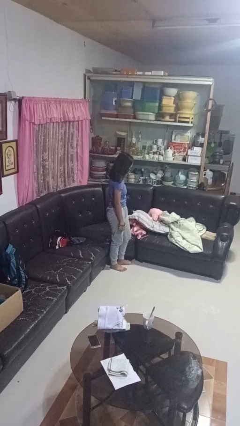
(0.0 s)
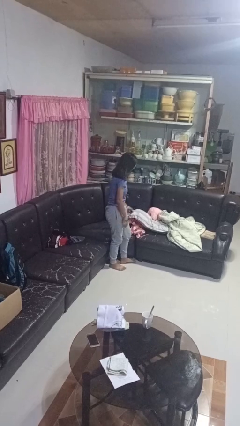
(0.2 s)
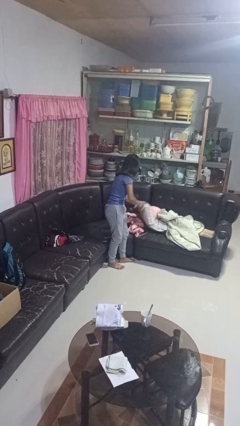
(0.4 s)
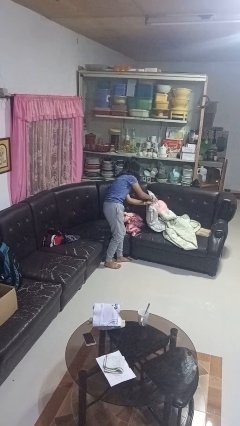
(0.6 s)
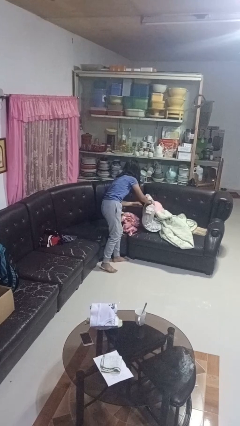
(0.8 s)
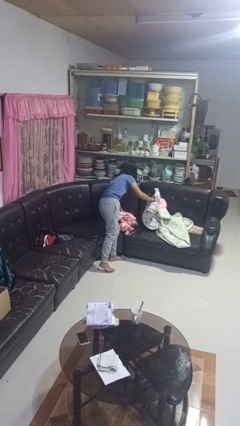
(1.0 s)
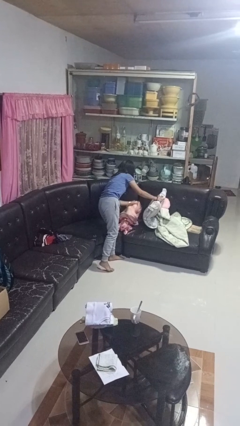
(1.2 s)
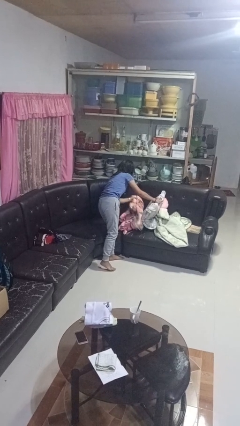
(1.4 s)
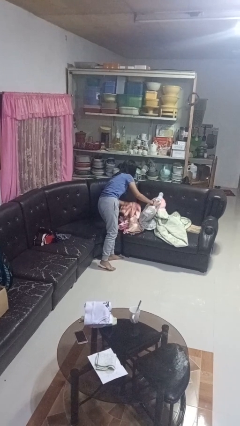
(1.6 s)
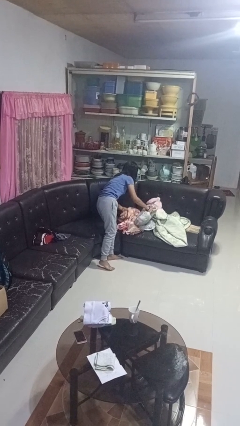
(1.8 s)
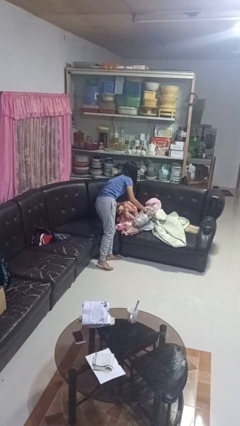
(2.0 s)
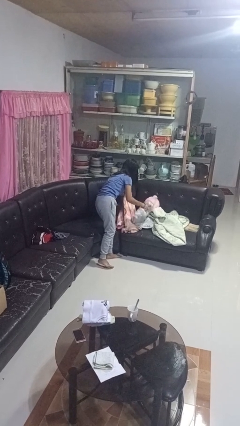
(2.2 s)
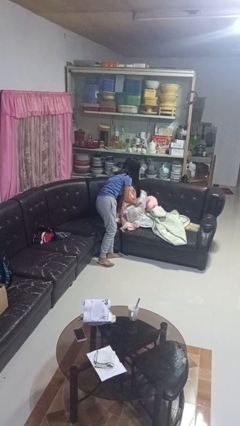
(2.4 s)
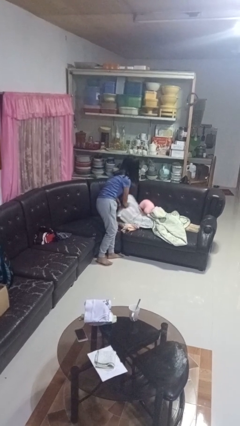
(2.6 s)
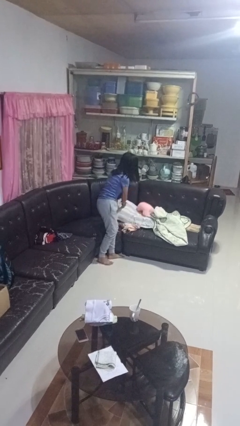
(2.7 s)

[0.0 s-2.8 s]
person searches in couch

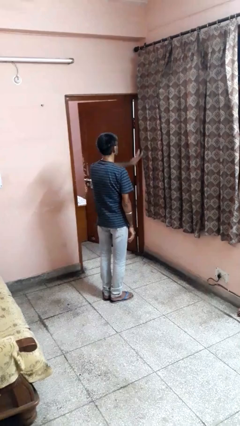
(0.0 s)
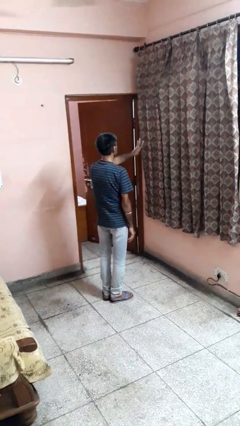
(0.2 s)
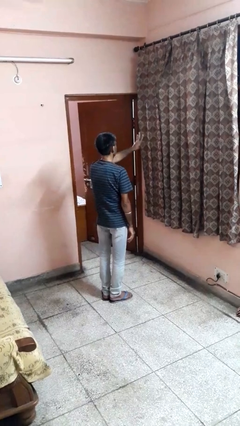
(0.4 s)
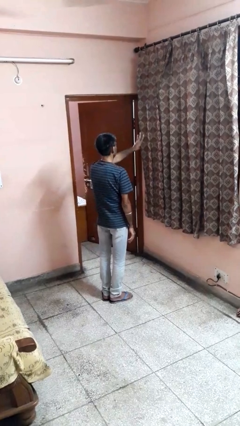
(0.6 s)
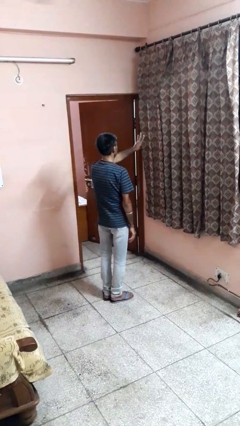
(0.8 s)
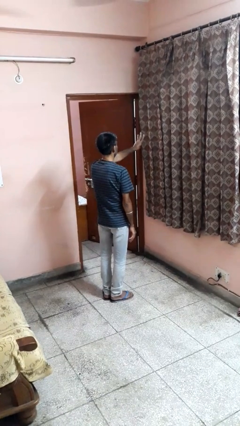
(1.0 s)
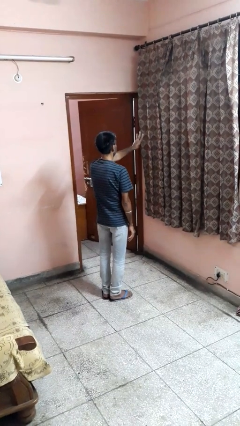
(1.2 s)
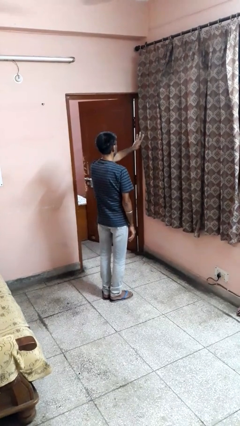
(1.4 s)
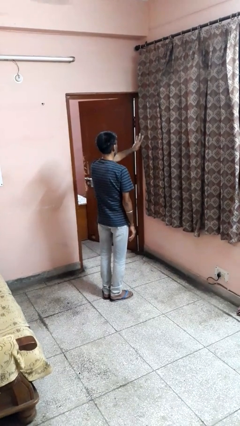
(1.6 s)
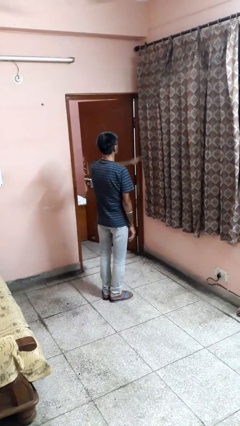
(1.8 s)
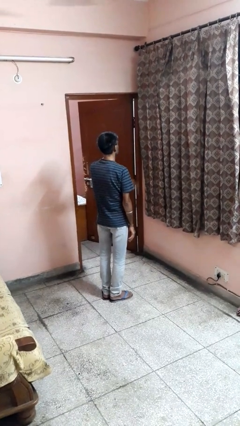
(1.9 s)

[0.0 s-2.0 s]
person gestures number three

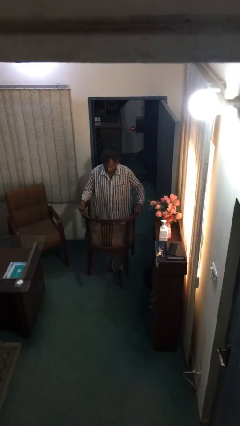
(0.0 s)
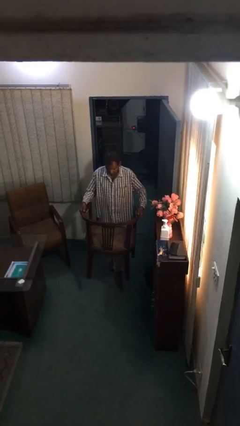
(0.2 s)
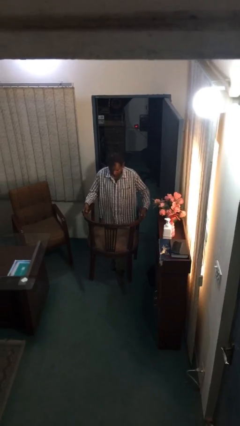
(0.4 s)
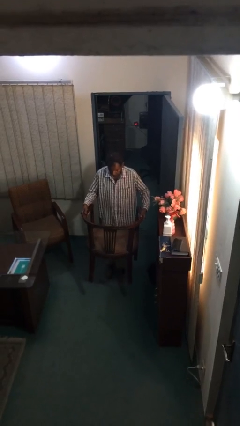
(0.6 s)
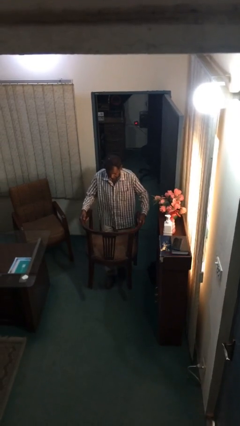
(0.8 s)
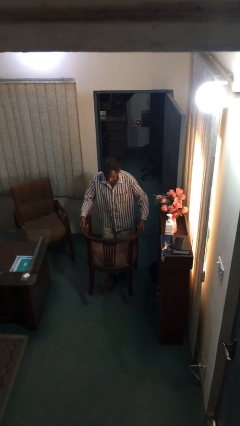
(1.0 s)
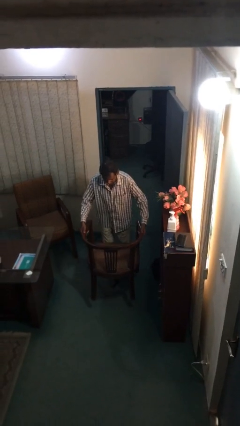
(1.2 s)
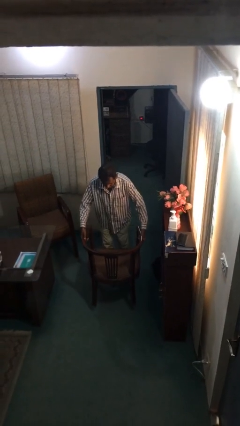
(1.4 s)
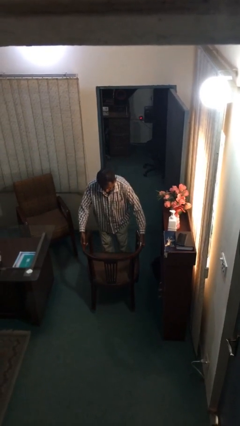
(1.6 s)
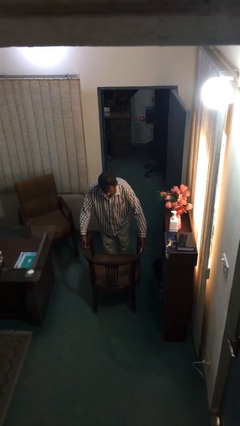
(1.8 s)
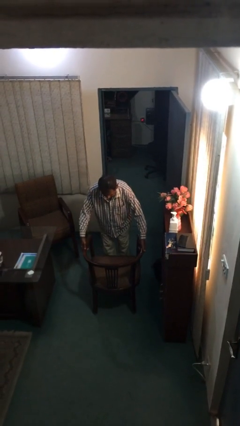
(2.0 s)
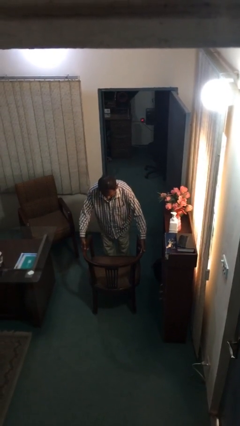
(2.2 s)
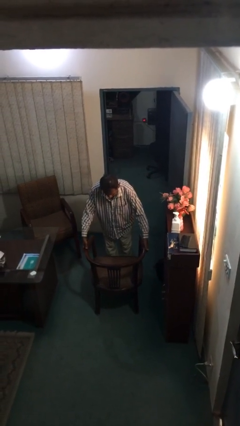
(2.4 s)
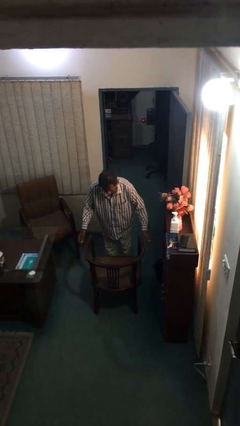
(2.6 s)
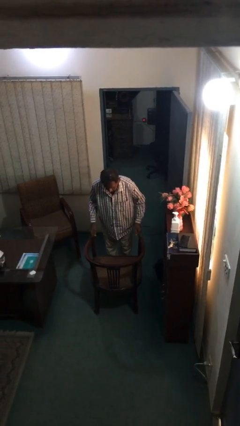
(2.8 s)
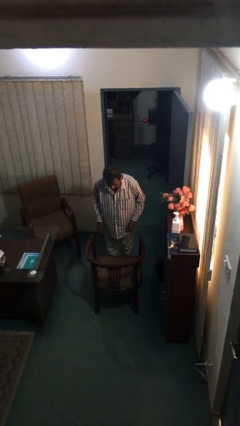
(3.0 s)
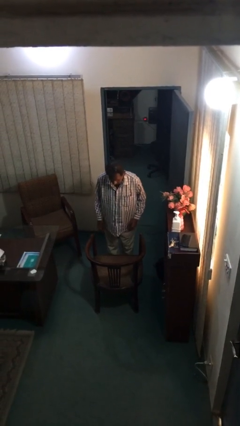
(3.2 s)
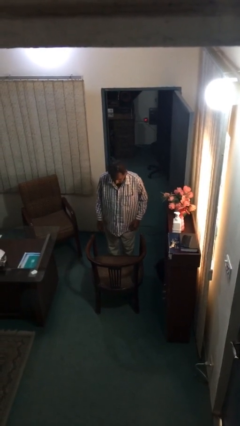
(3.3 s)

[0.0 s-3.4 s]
person puts down object on floor

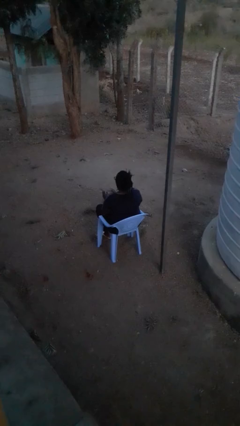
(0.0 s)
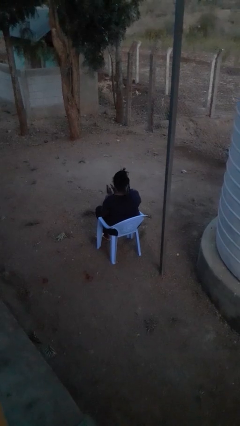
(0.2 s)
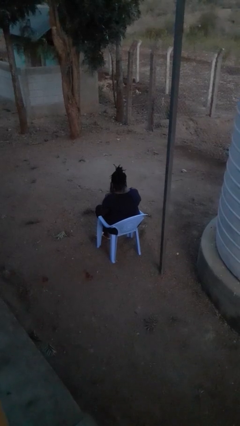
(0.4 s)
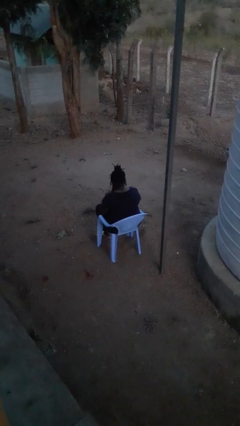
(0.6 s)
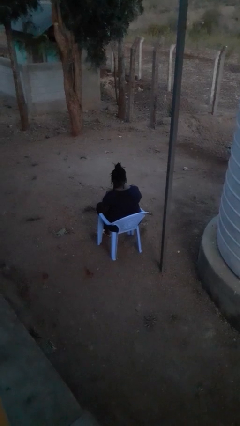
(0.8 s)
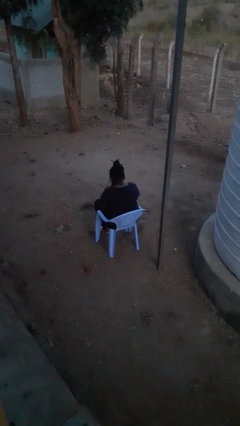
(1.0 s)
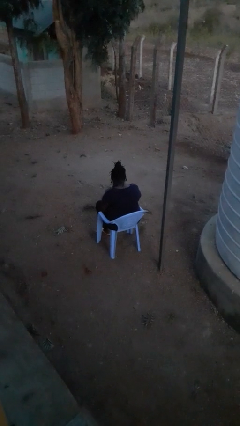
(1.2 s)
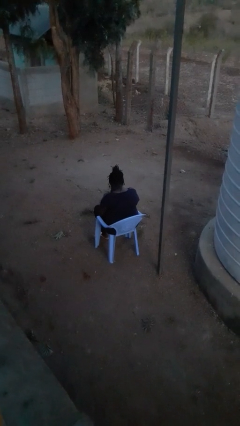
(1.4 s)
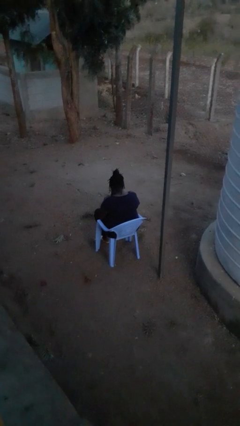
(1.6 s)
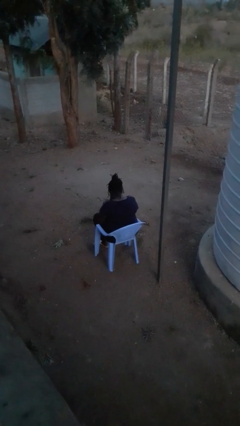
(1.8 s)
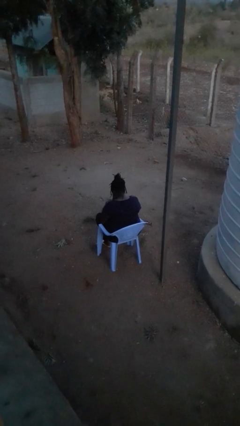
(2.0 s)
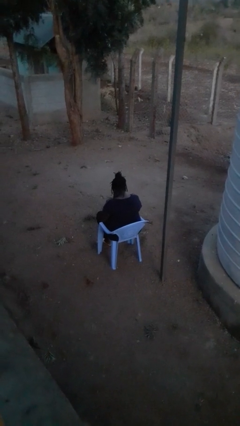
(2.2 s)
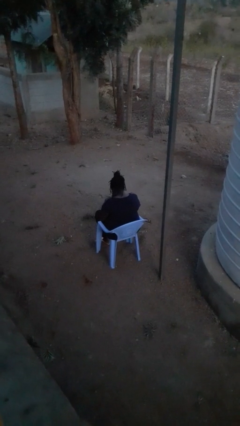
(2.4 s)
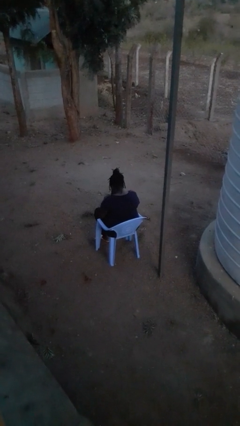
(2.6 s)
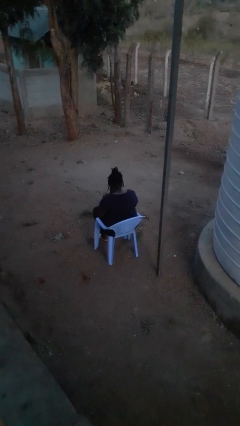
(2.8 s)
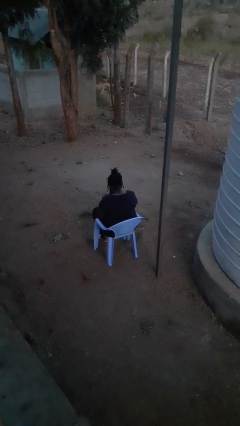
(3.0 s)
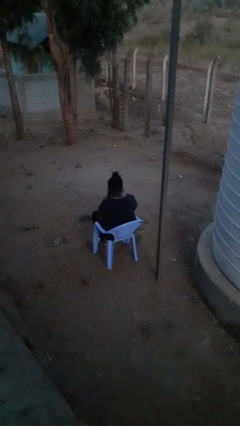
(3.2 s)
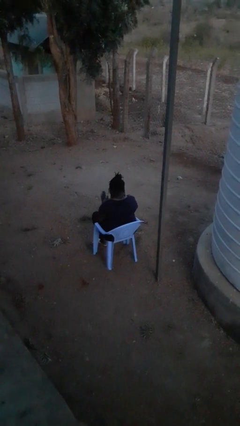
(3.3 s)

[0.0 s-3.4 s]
person prays

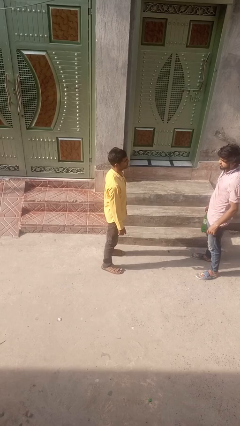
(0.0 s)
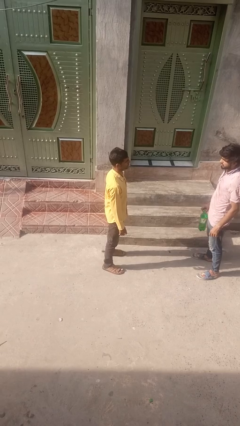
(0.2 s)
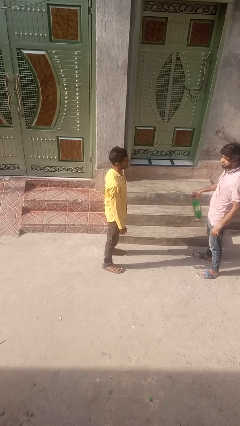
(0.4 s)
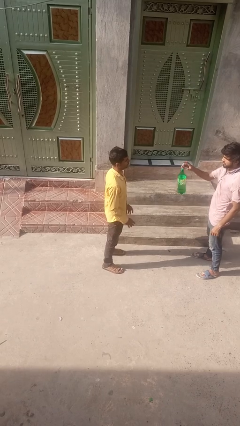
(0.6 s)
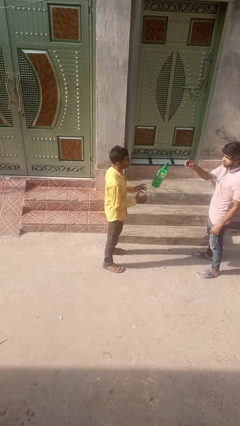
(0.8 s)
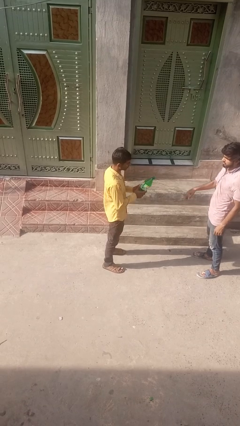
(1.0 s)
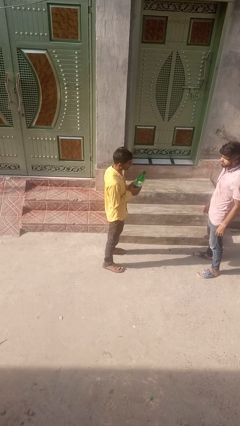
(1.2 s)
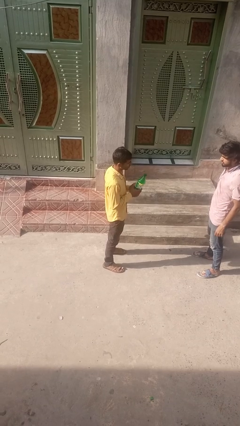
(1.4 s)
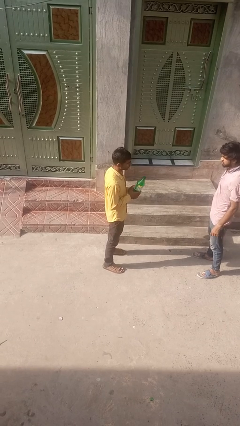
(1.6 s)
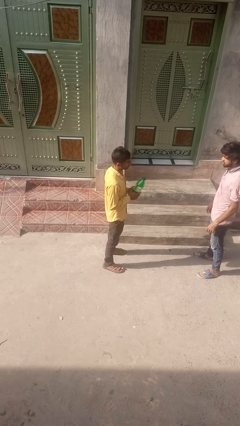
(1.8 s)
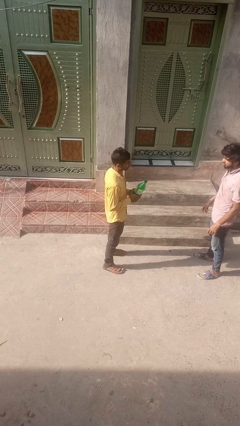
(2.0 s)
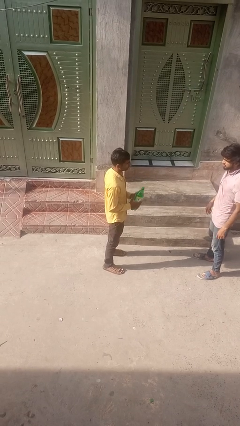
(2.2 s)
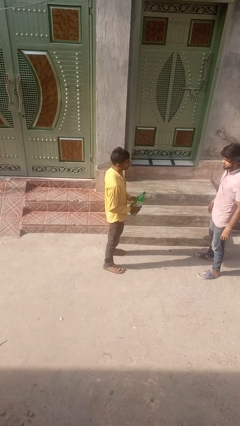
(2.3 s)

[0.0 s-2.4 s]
person catches object from person

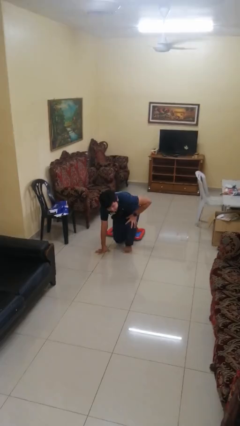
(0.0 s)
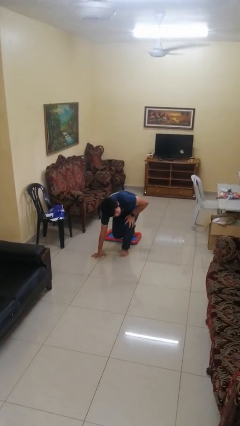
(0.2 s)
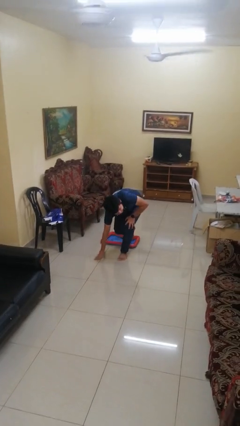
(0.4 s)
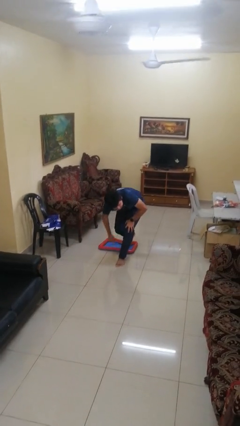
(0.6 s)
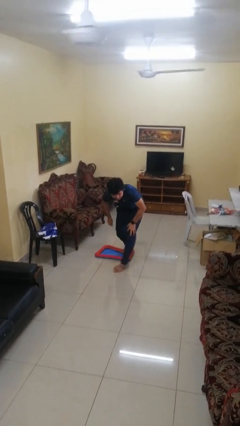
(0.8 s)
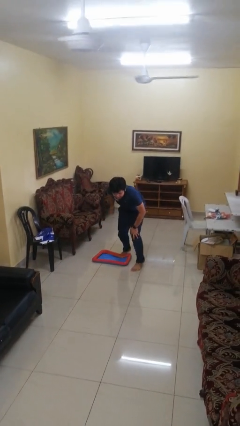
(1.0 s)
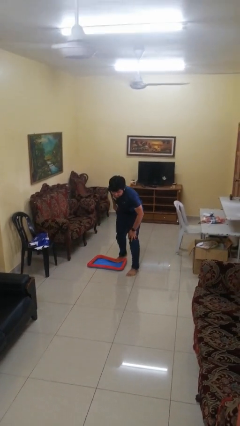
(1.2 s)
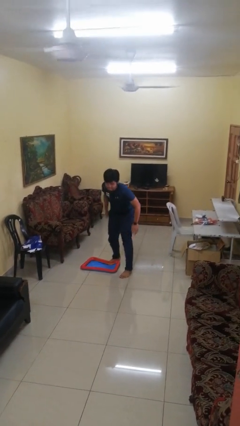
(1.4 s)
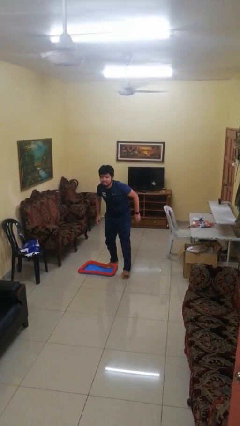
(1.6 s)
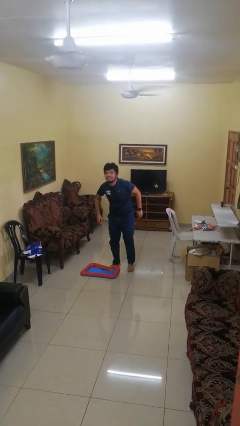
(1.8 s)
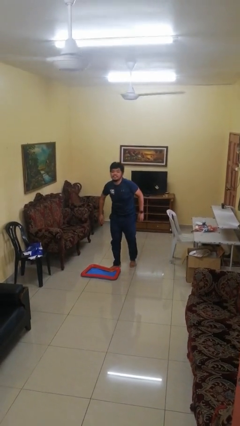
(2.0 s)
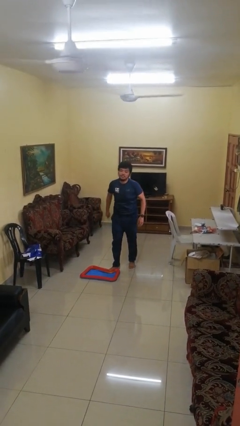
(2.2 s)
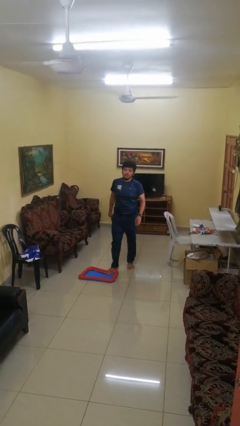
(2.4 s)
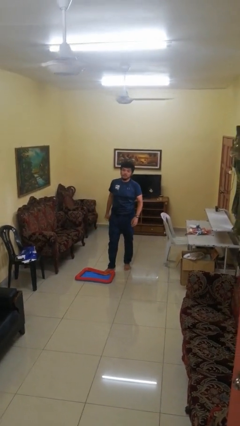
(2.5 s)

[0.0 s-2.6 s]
person stands up from floor

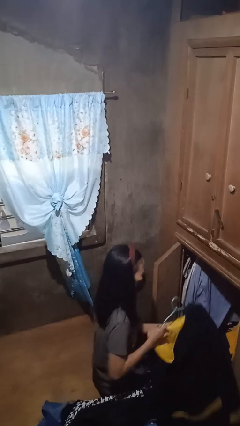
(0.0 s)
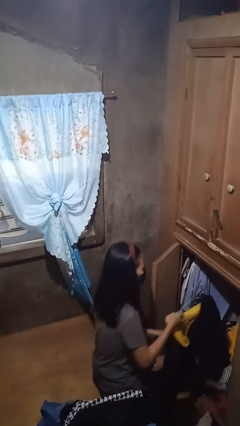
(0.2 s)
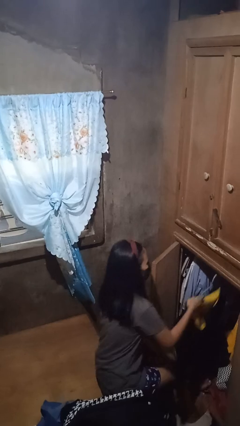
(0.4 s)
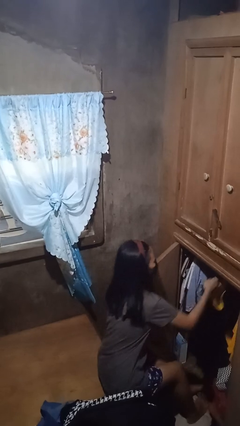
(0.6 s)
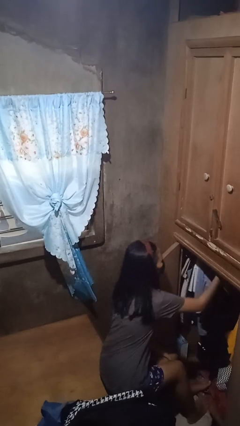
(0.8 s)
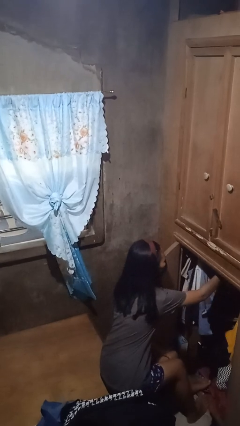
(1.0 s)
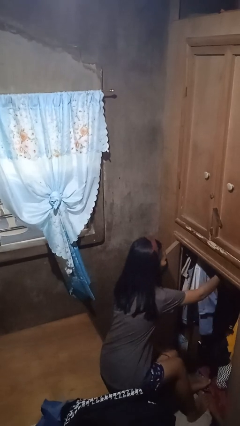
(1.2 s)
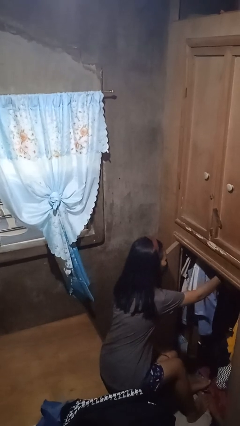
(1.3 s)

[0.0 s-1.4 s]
person puts clothes into closet
